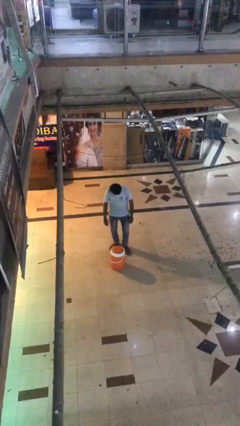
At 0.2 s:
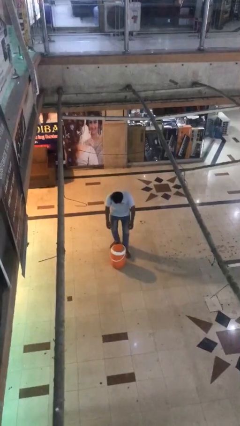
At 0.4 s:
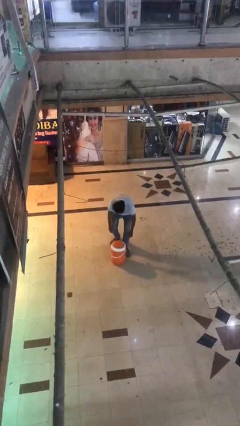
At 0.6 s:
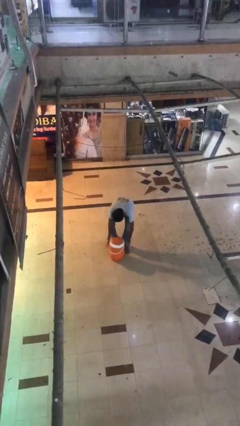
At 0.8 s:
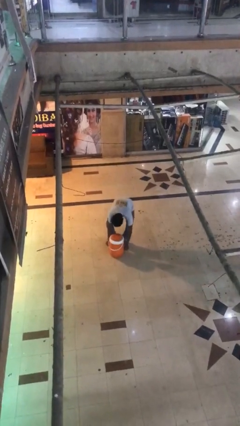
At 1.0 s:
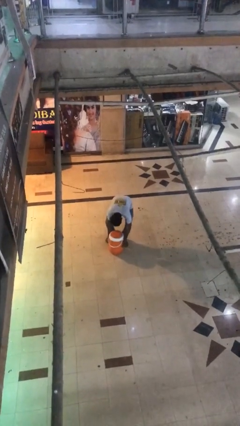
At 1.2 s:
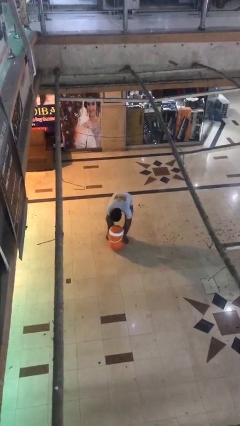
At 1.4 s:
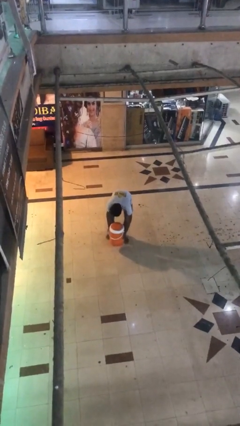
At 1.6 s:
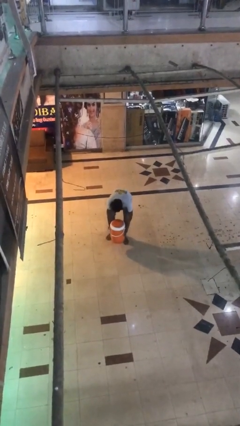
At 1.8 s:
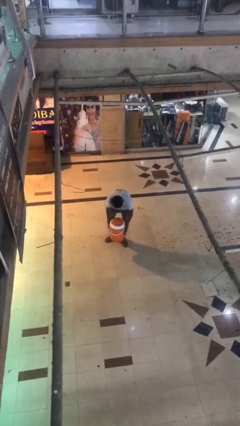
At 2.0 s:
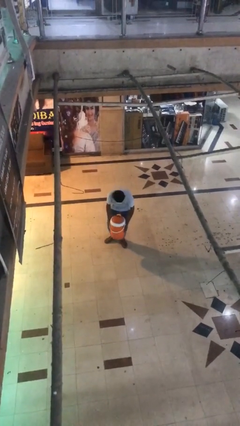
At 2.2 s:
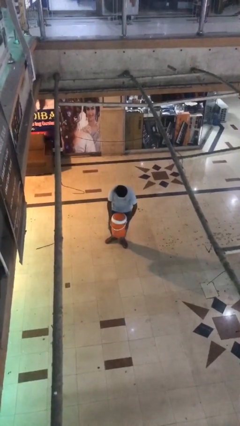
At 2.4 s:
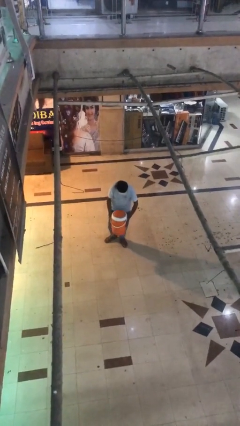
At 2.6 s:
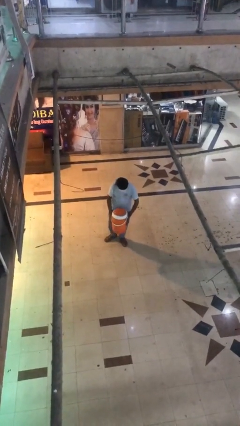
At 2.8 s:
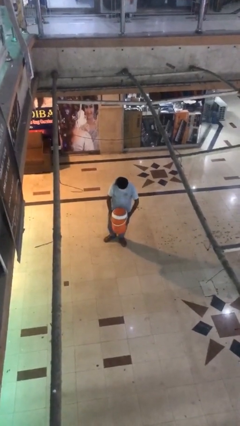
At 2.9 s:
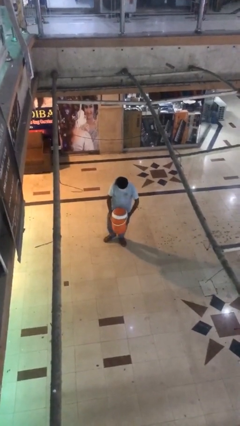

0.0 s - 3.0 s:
person picks up object from floor

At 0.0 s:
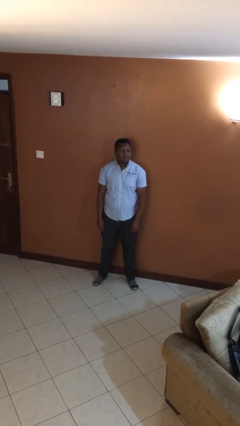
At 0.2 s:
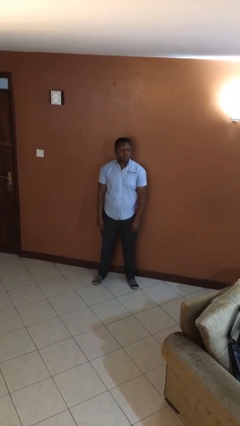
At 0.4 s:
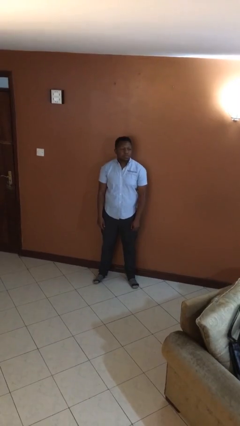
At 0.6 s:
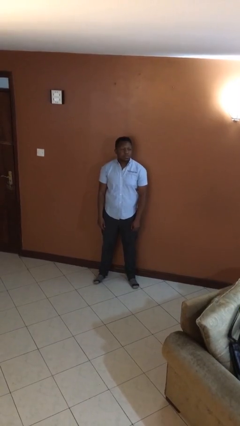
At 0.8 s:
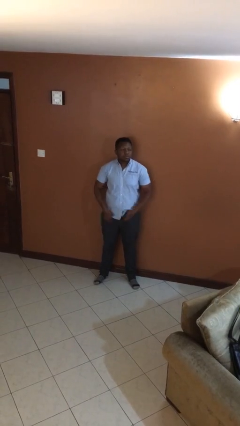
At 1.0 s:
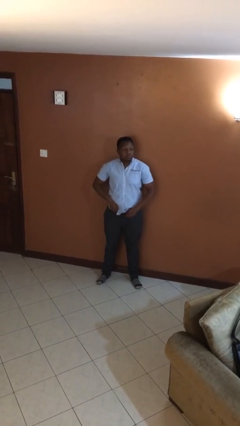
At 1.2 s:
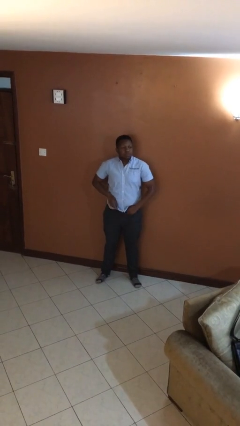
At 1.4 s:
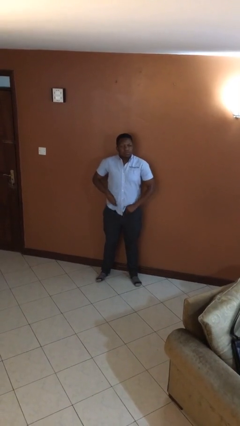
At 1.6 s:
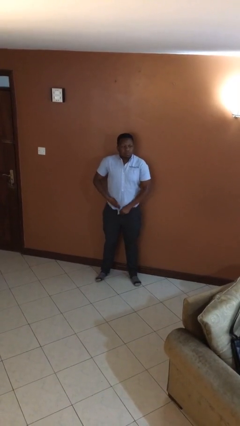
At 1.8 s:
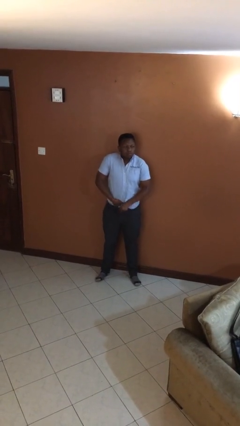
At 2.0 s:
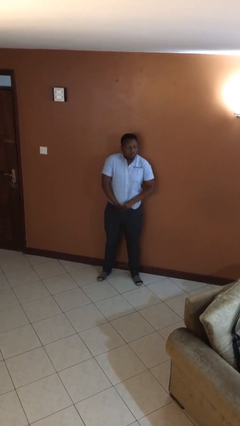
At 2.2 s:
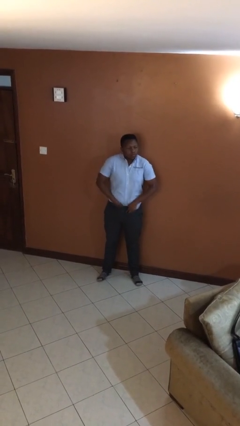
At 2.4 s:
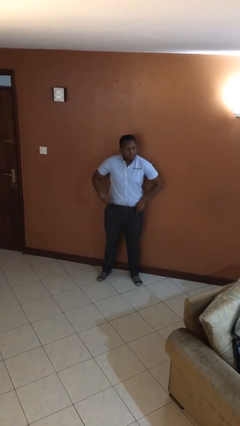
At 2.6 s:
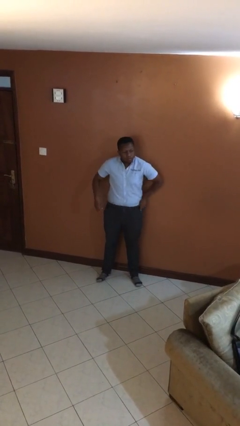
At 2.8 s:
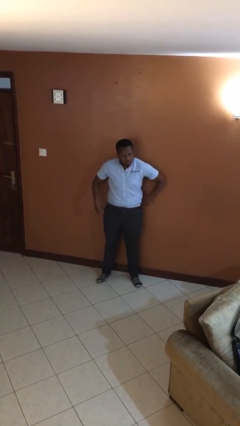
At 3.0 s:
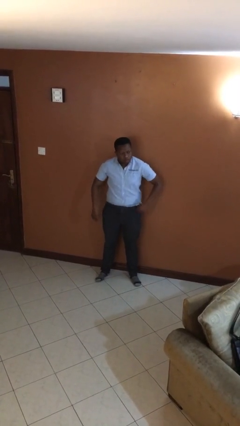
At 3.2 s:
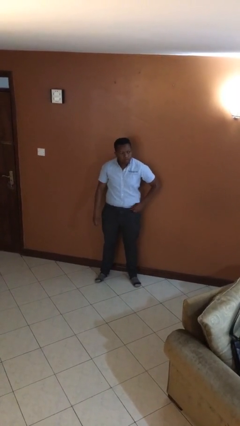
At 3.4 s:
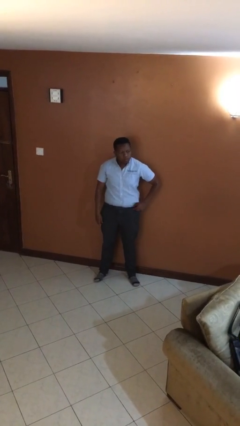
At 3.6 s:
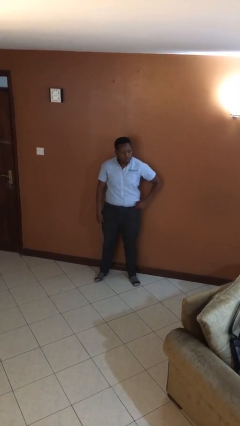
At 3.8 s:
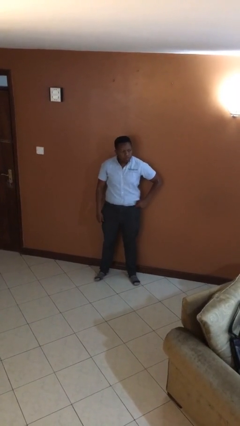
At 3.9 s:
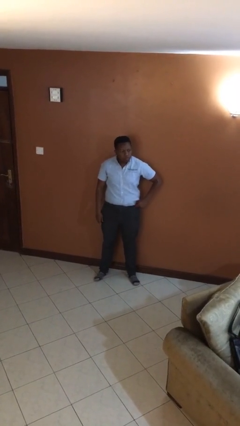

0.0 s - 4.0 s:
person tucks in shirt

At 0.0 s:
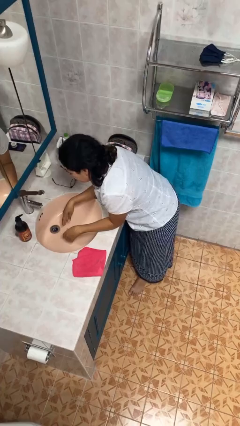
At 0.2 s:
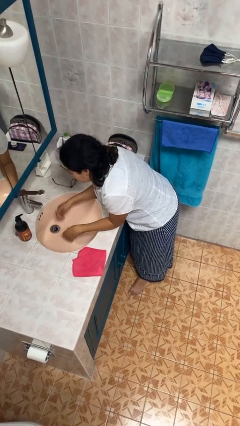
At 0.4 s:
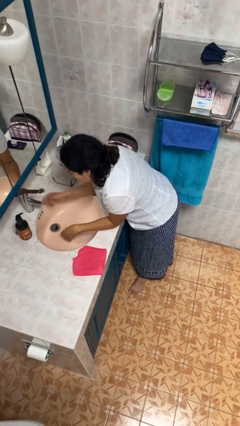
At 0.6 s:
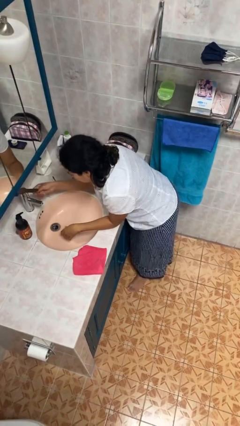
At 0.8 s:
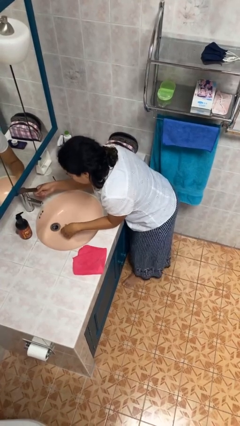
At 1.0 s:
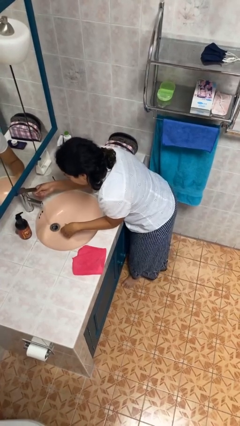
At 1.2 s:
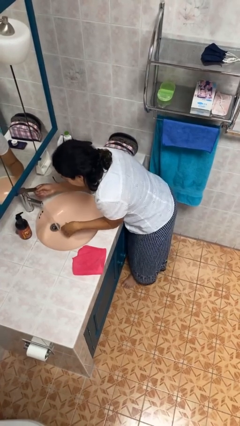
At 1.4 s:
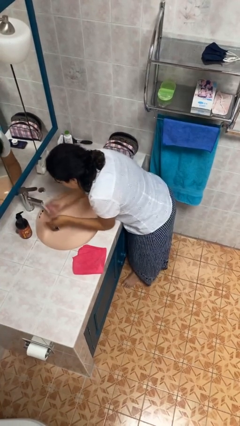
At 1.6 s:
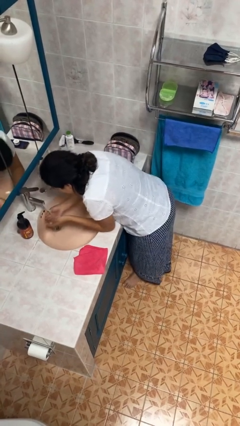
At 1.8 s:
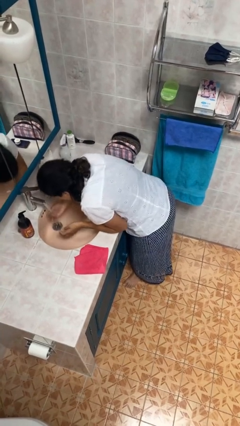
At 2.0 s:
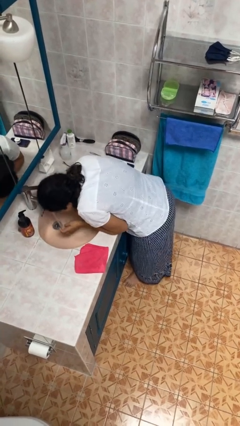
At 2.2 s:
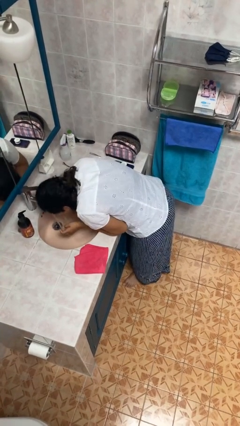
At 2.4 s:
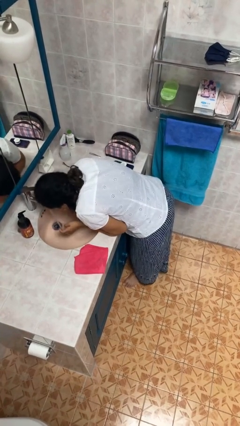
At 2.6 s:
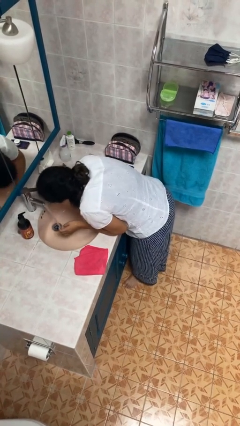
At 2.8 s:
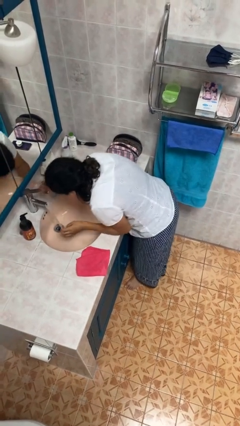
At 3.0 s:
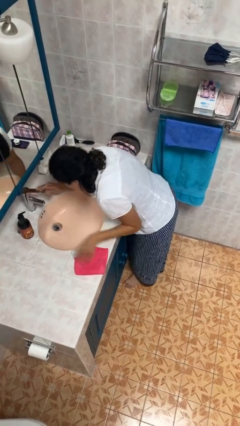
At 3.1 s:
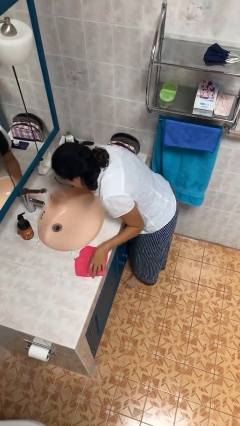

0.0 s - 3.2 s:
person washes face

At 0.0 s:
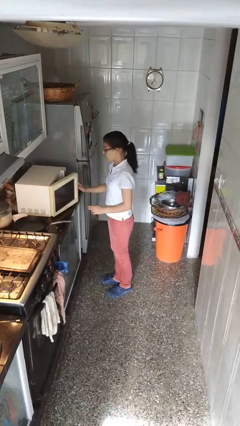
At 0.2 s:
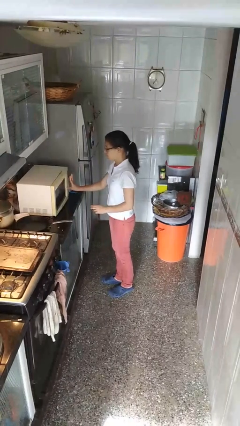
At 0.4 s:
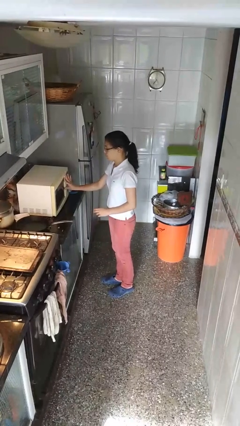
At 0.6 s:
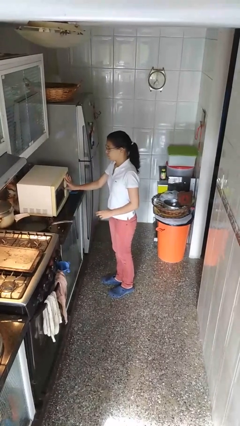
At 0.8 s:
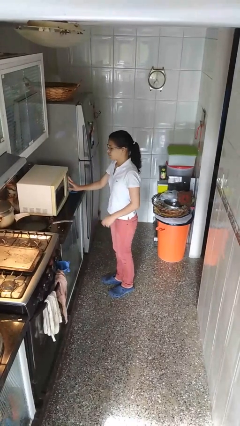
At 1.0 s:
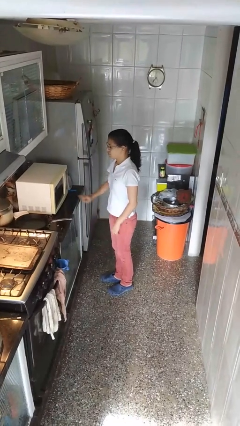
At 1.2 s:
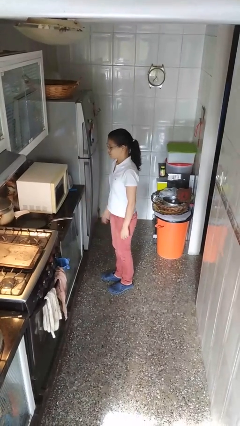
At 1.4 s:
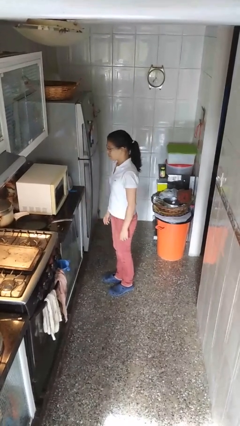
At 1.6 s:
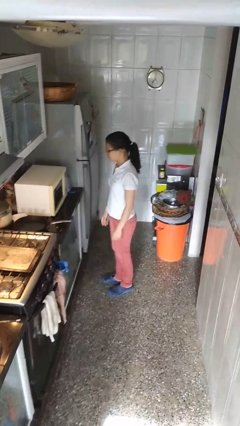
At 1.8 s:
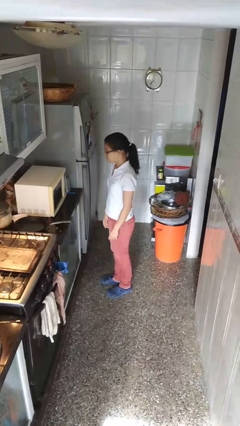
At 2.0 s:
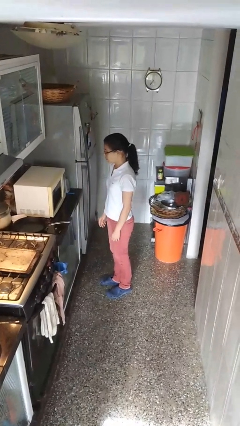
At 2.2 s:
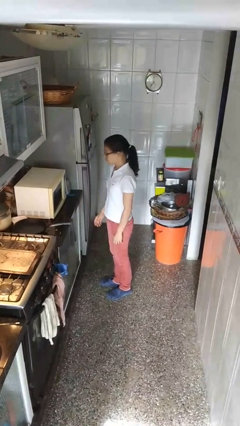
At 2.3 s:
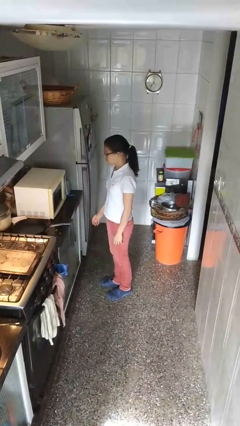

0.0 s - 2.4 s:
person closes microwave

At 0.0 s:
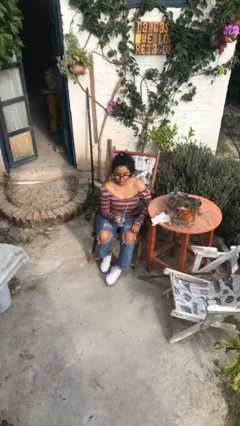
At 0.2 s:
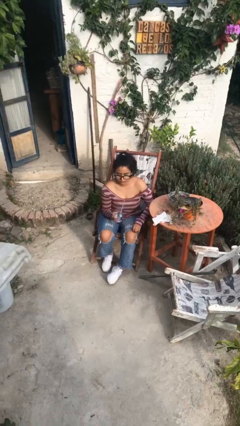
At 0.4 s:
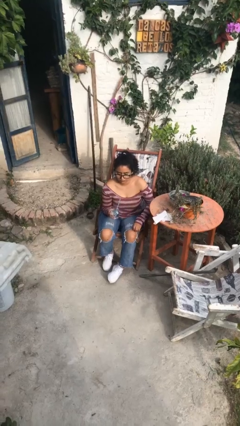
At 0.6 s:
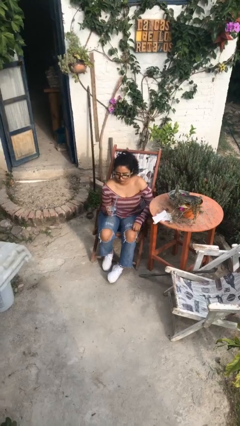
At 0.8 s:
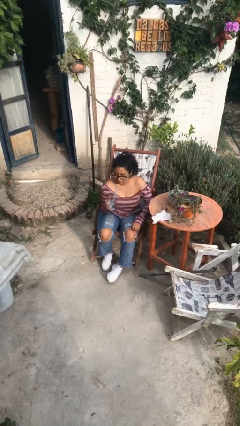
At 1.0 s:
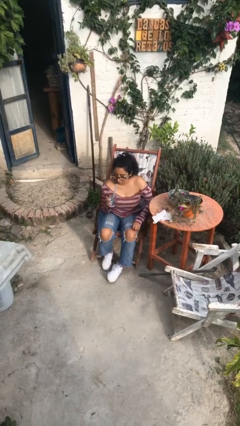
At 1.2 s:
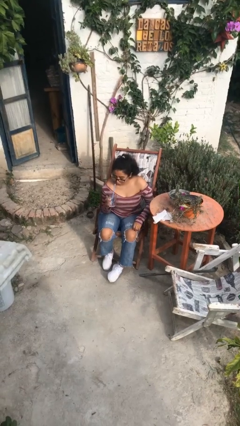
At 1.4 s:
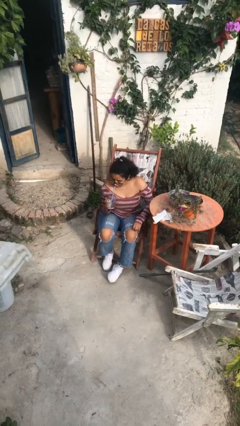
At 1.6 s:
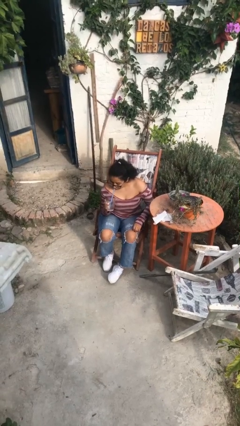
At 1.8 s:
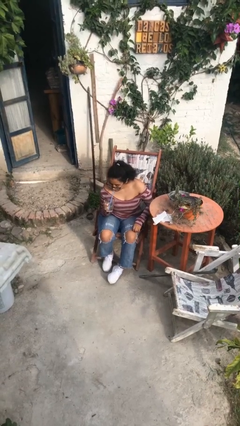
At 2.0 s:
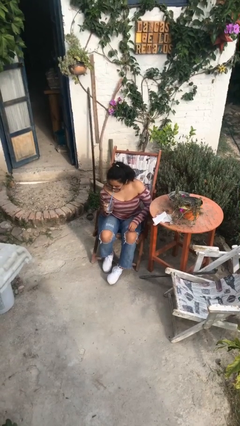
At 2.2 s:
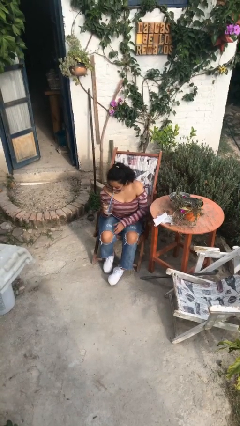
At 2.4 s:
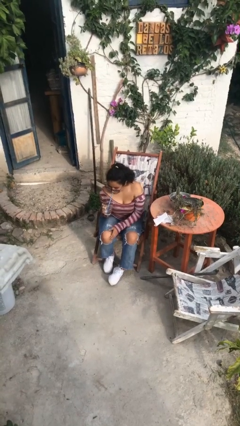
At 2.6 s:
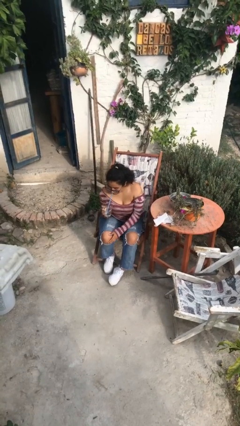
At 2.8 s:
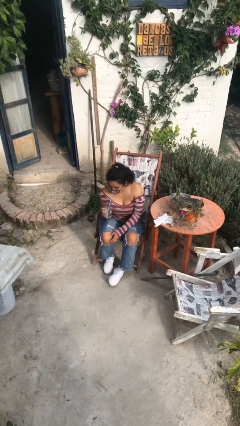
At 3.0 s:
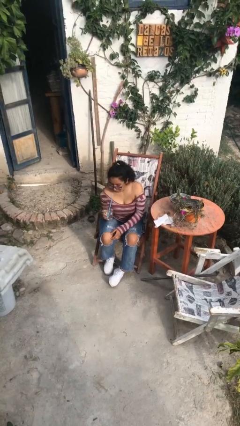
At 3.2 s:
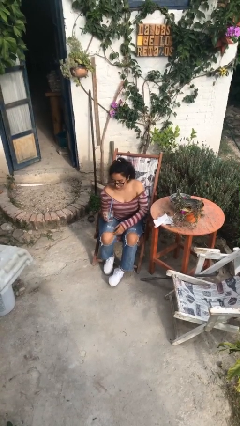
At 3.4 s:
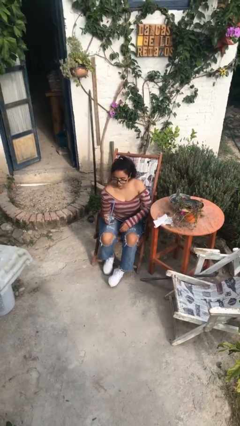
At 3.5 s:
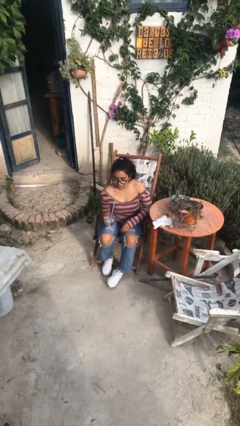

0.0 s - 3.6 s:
person drinks from straw

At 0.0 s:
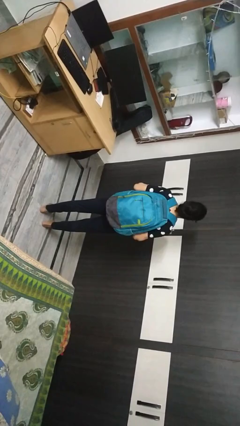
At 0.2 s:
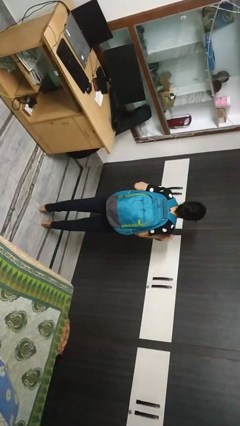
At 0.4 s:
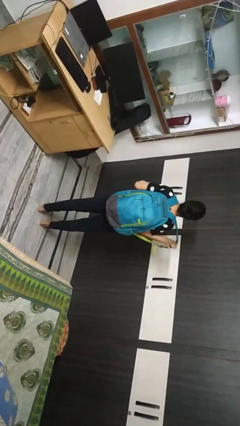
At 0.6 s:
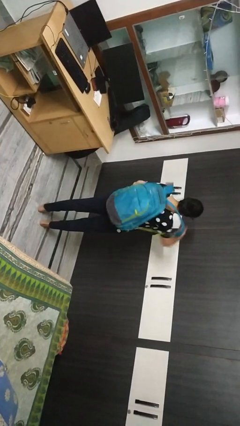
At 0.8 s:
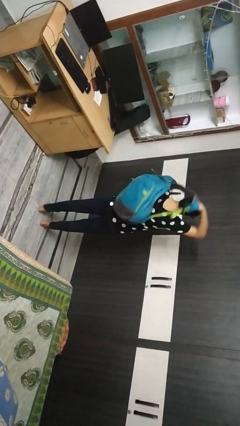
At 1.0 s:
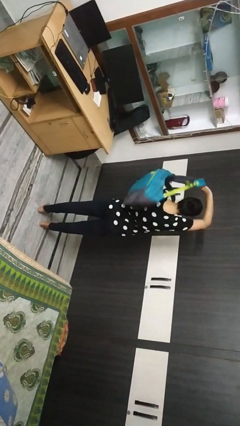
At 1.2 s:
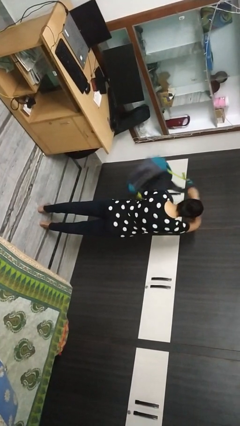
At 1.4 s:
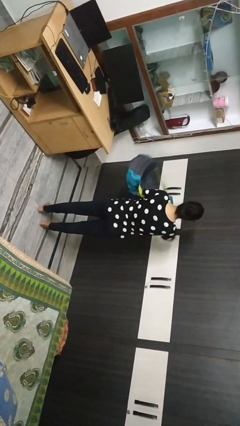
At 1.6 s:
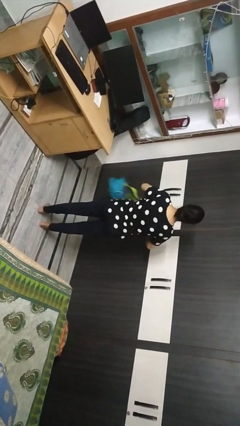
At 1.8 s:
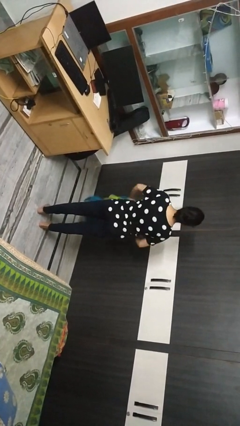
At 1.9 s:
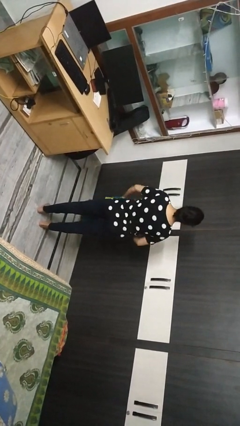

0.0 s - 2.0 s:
person takes off backpack
